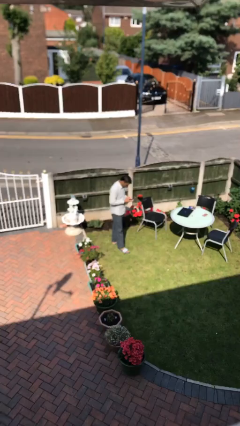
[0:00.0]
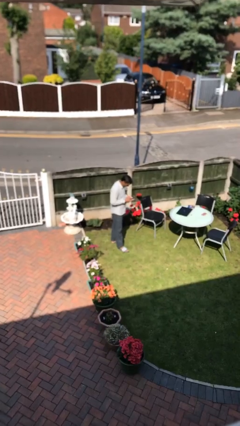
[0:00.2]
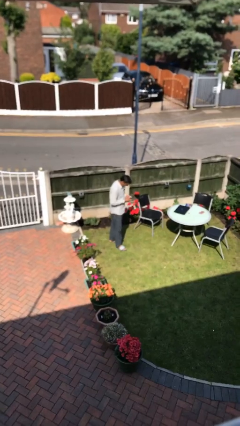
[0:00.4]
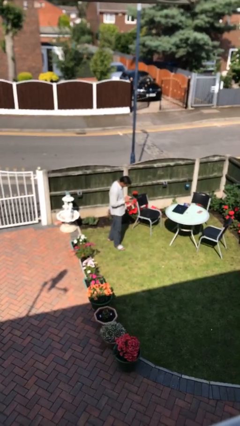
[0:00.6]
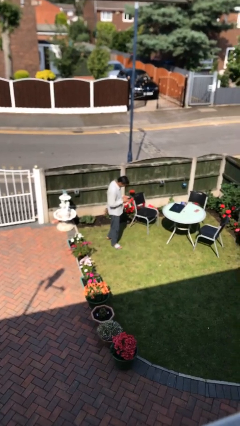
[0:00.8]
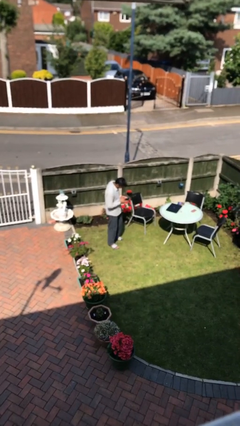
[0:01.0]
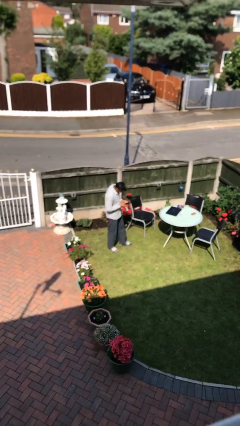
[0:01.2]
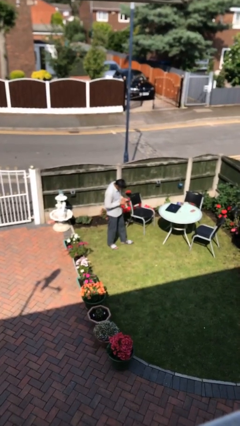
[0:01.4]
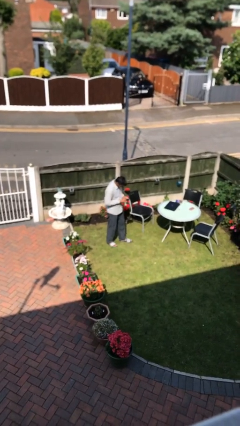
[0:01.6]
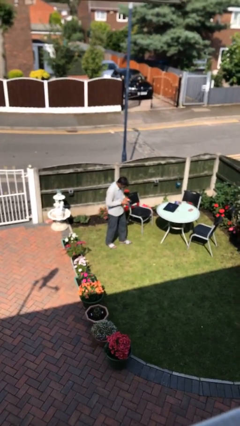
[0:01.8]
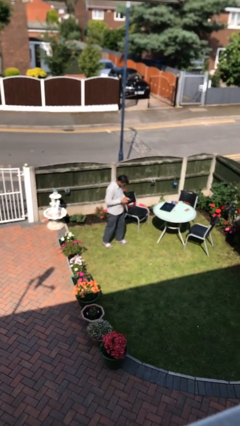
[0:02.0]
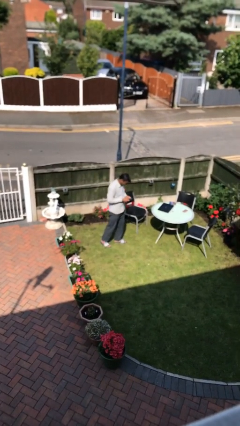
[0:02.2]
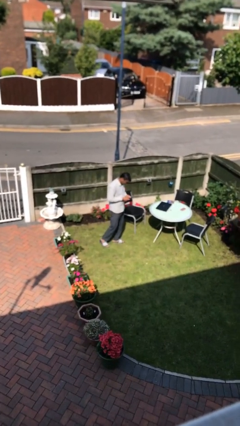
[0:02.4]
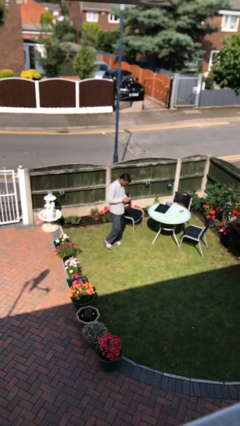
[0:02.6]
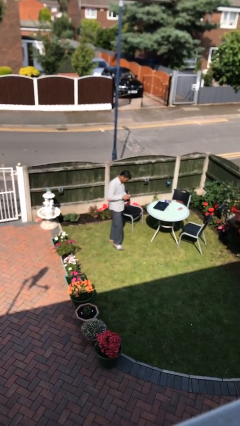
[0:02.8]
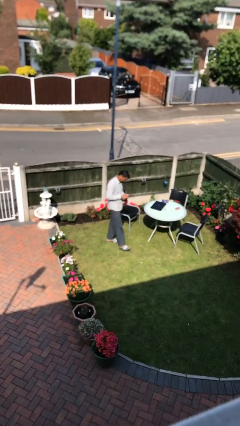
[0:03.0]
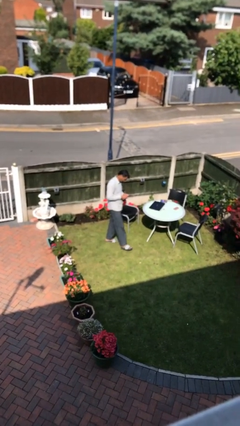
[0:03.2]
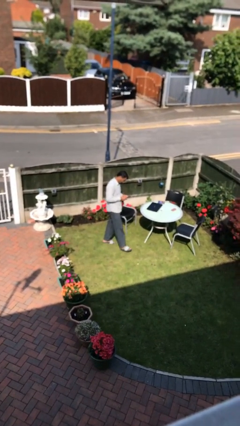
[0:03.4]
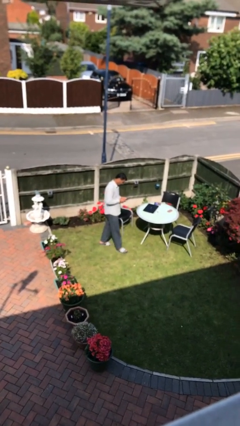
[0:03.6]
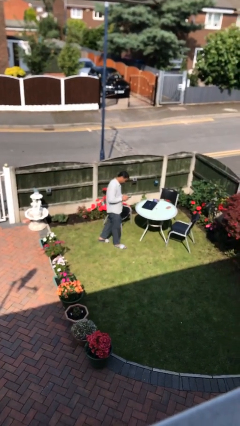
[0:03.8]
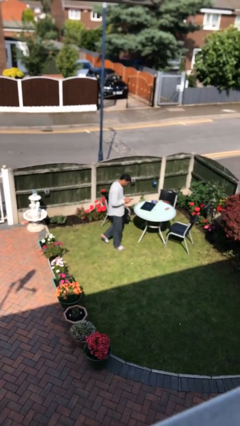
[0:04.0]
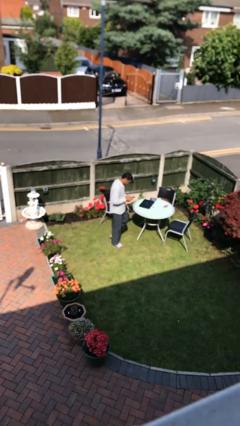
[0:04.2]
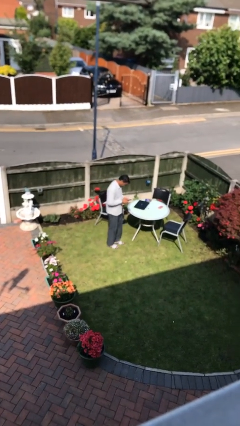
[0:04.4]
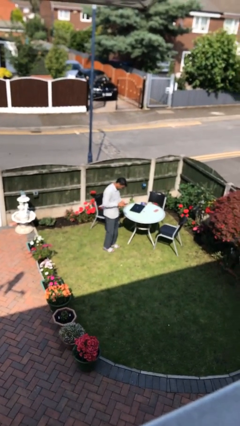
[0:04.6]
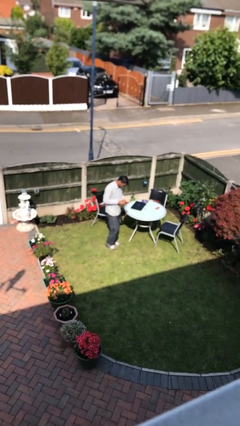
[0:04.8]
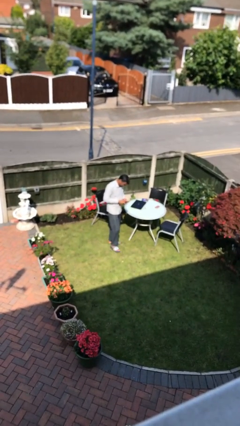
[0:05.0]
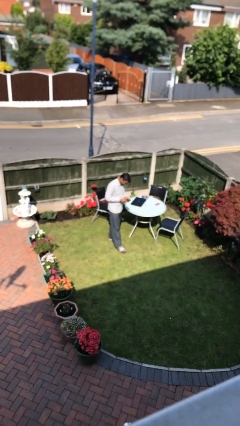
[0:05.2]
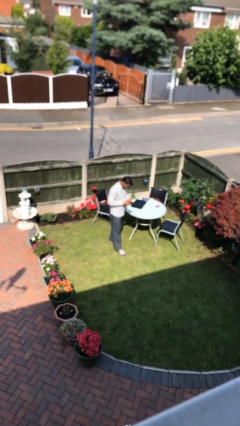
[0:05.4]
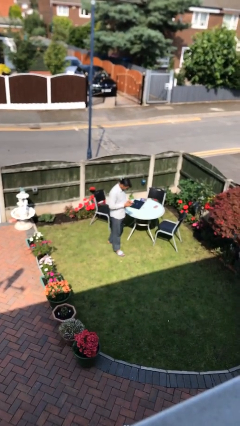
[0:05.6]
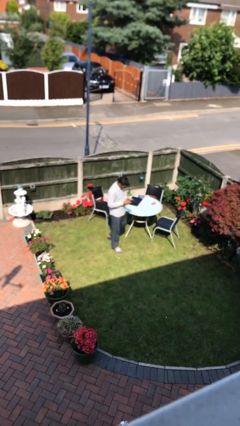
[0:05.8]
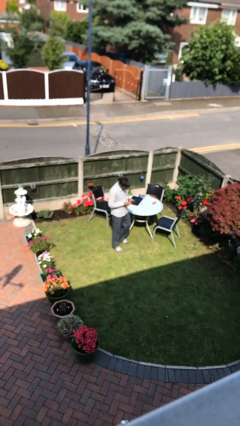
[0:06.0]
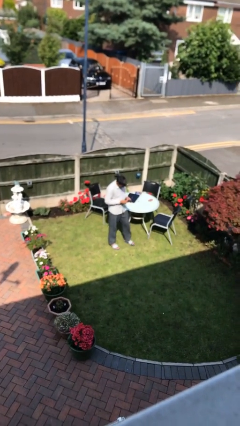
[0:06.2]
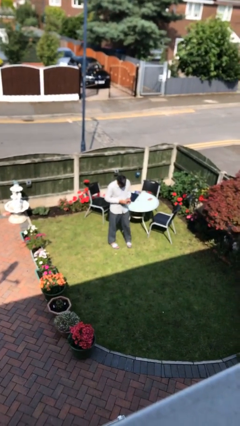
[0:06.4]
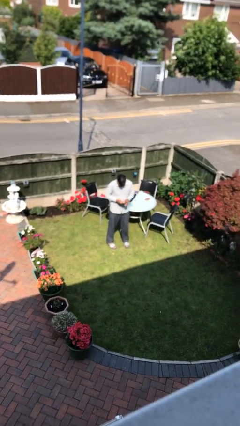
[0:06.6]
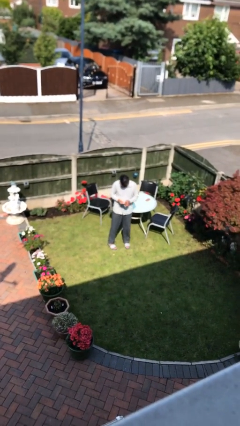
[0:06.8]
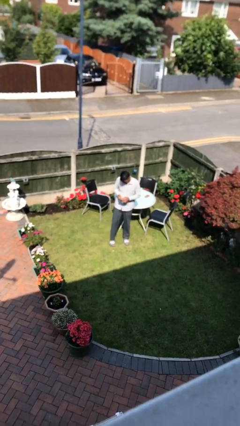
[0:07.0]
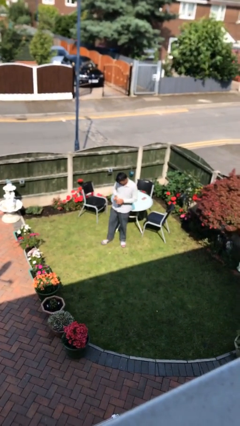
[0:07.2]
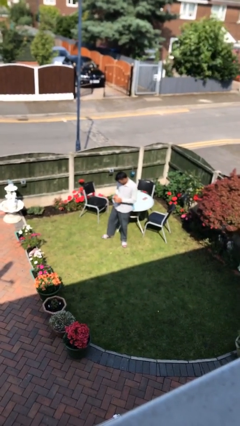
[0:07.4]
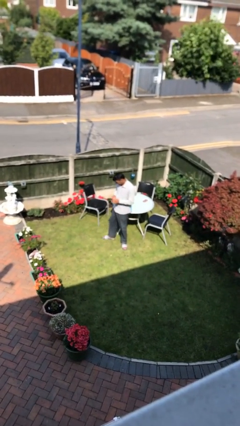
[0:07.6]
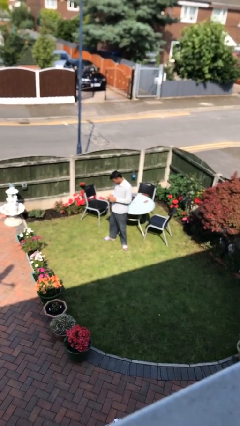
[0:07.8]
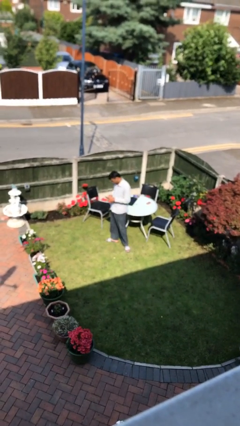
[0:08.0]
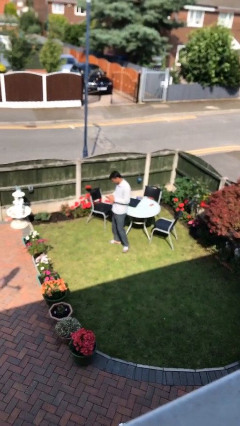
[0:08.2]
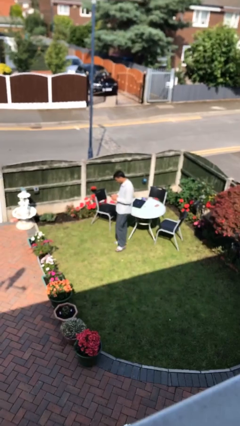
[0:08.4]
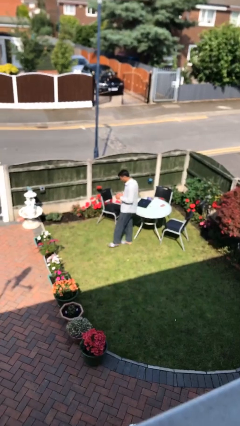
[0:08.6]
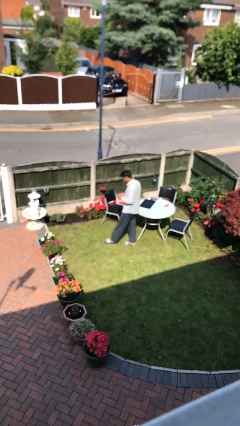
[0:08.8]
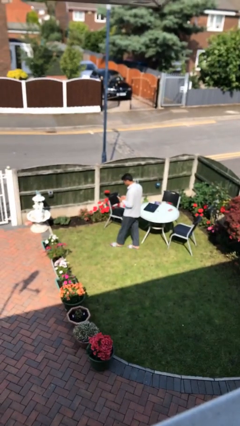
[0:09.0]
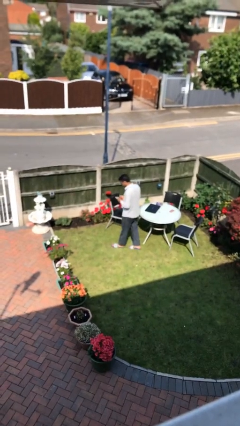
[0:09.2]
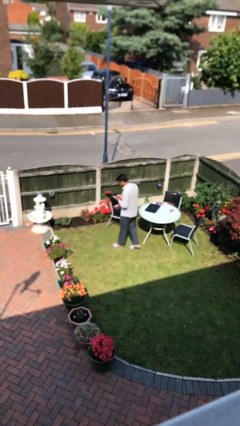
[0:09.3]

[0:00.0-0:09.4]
person texts on phone

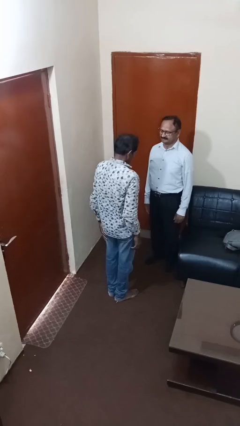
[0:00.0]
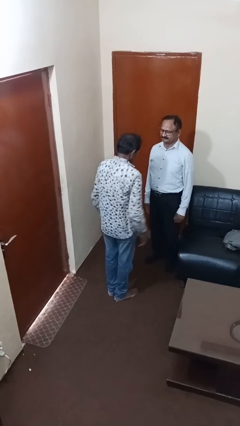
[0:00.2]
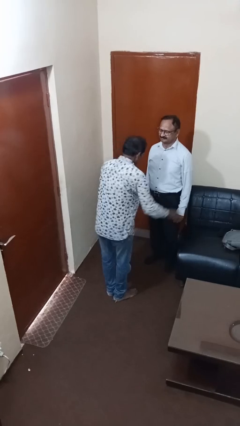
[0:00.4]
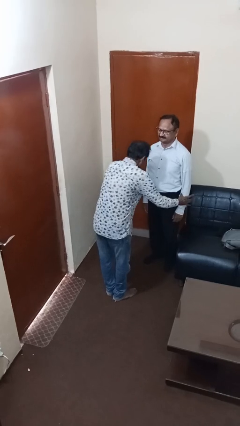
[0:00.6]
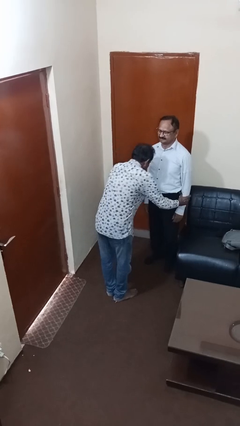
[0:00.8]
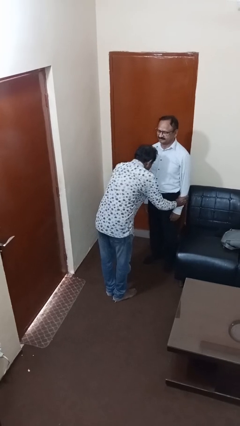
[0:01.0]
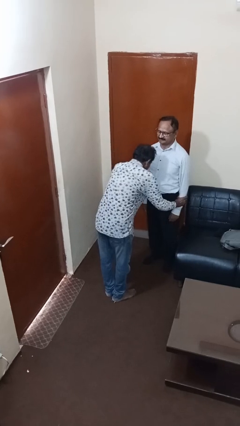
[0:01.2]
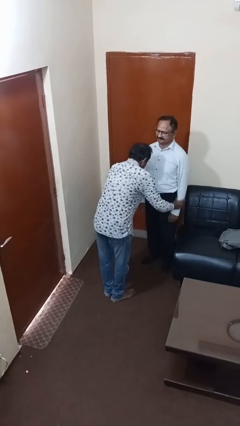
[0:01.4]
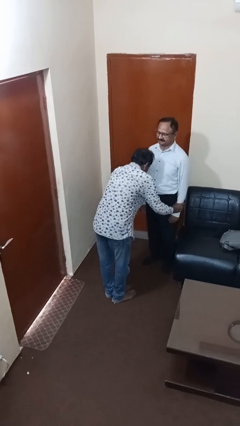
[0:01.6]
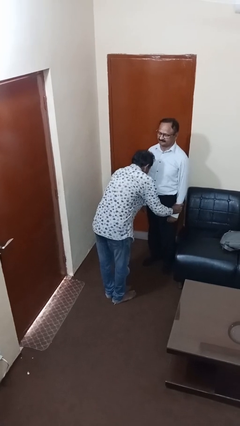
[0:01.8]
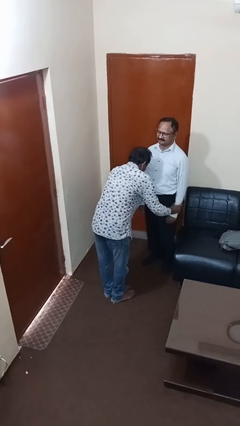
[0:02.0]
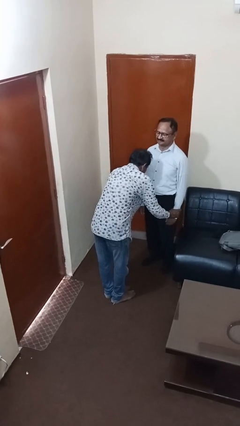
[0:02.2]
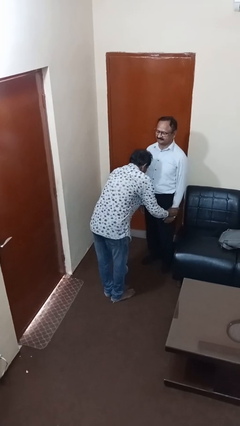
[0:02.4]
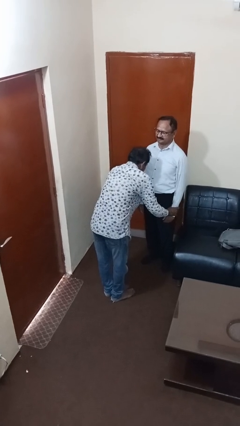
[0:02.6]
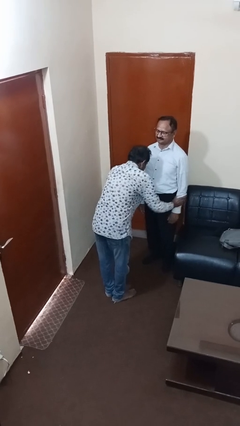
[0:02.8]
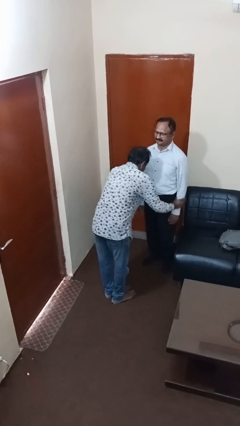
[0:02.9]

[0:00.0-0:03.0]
person grabs person by forearm

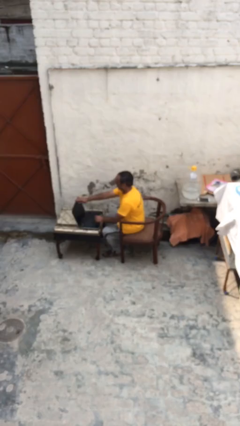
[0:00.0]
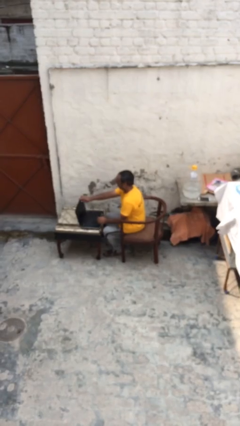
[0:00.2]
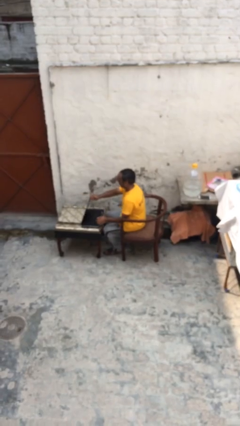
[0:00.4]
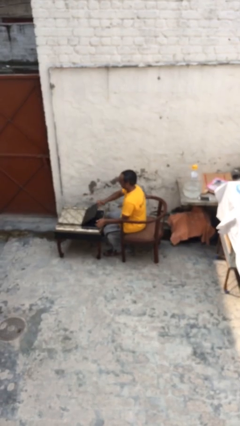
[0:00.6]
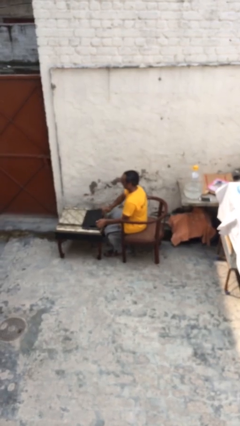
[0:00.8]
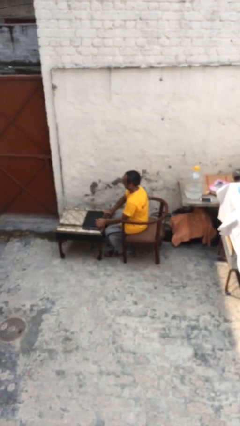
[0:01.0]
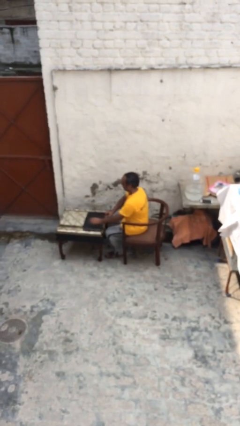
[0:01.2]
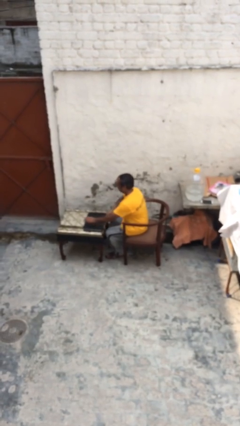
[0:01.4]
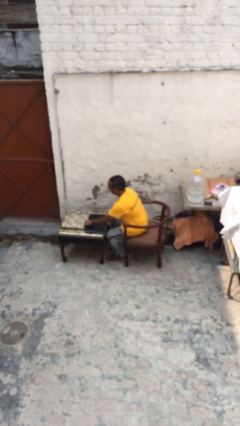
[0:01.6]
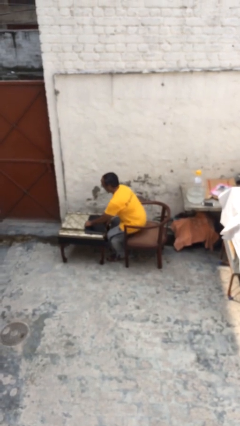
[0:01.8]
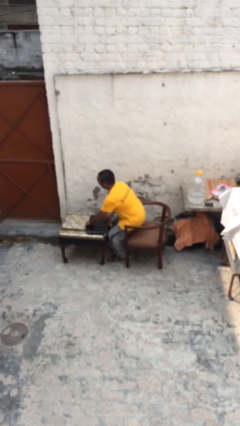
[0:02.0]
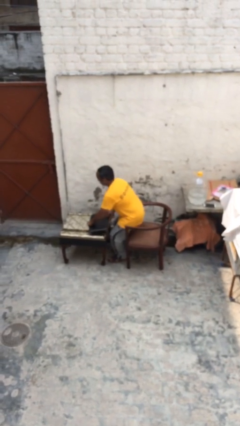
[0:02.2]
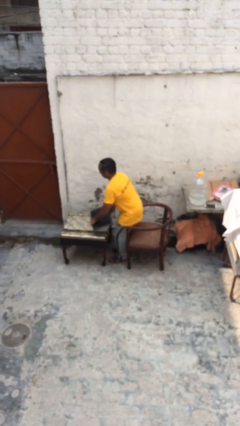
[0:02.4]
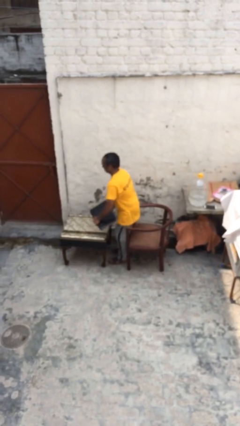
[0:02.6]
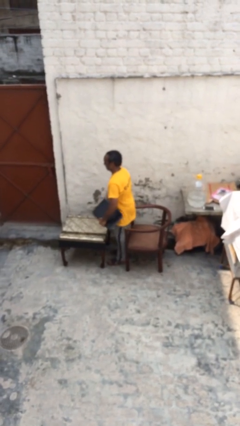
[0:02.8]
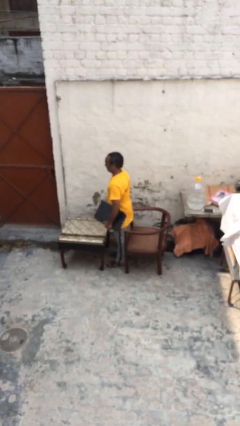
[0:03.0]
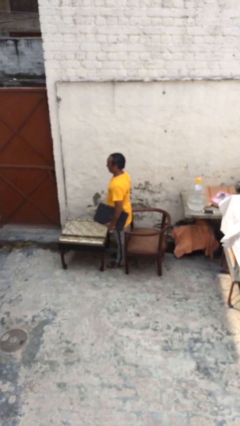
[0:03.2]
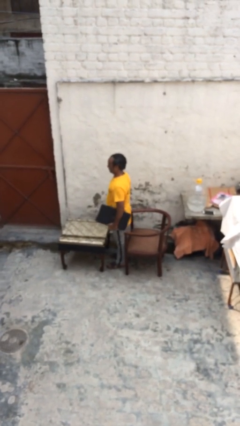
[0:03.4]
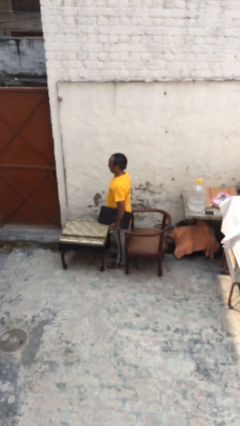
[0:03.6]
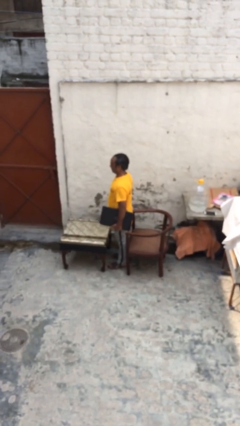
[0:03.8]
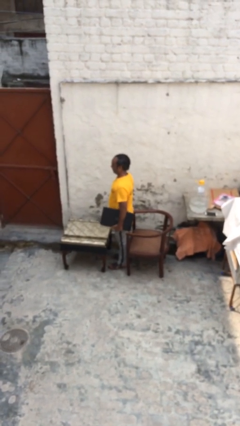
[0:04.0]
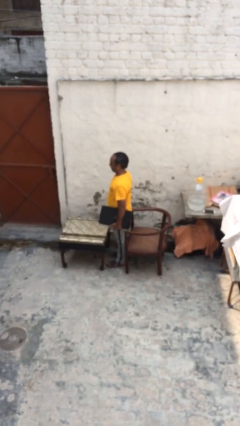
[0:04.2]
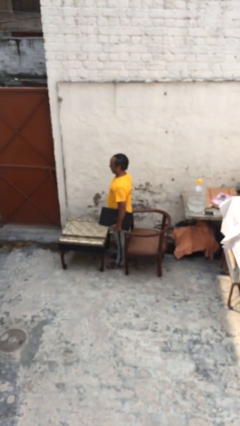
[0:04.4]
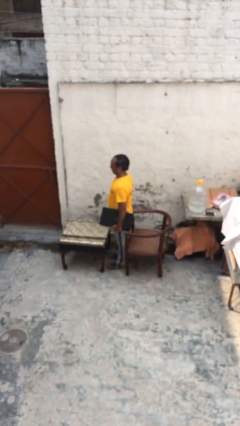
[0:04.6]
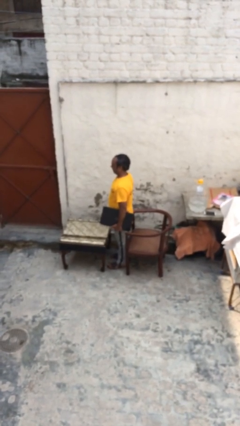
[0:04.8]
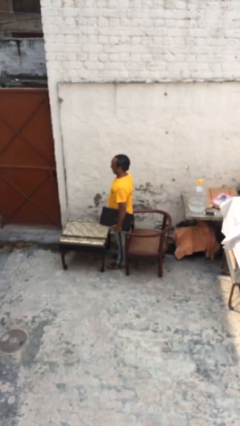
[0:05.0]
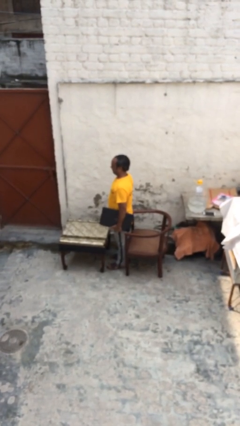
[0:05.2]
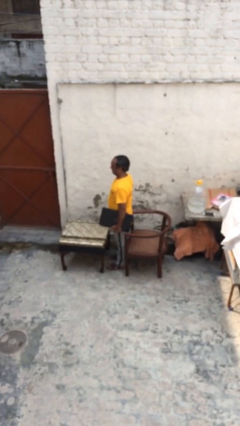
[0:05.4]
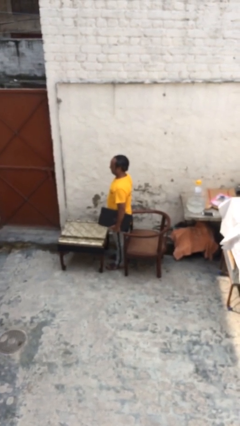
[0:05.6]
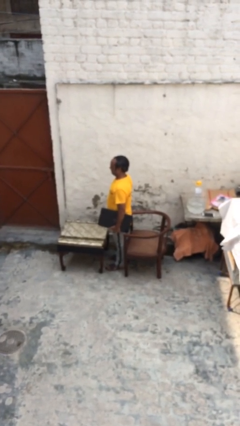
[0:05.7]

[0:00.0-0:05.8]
person stands up
